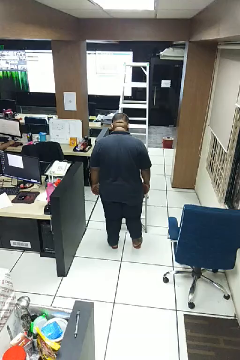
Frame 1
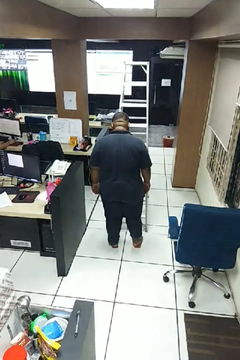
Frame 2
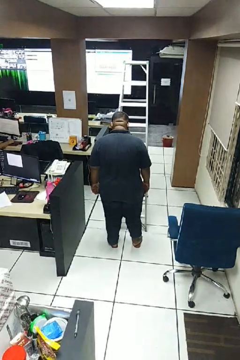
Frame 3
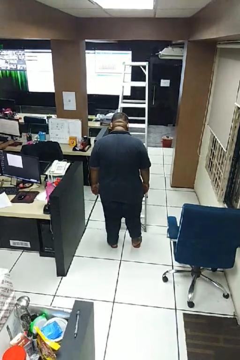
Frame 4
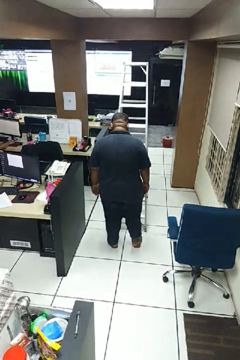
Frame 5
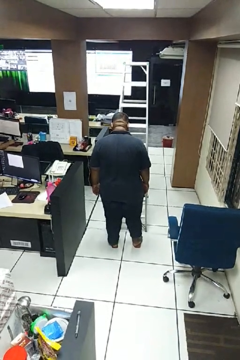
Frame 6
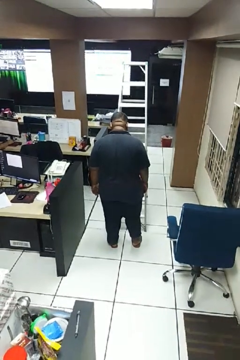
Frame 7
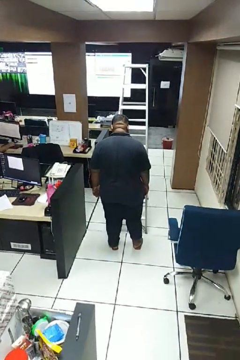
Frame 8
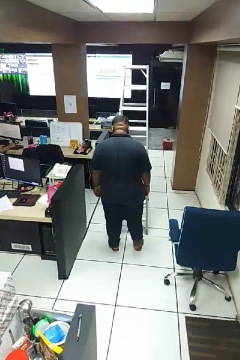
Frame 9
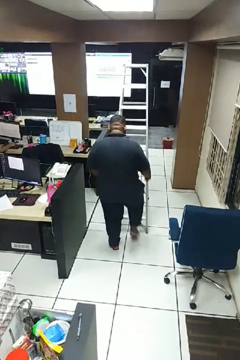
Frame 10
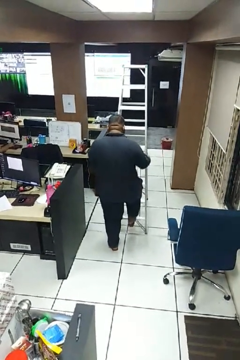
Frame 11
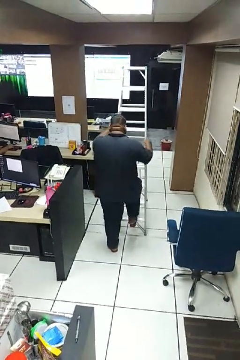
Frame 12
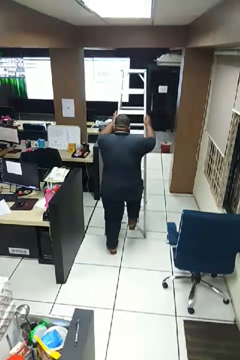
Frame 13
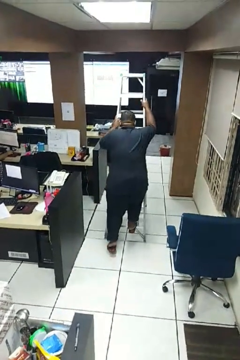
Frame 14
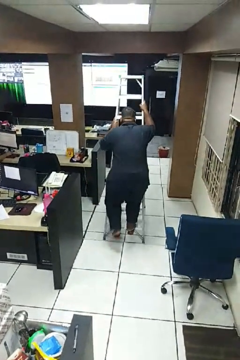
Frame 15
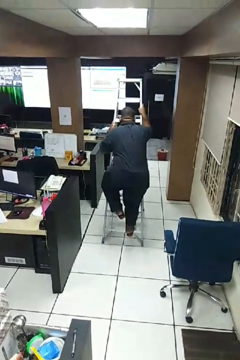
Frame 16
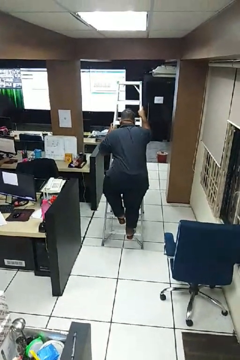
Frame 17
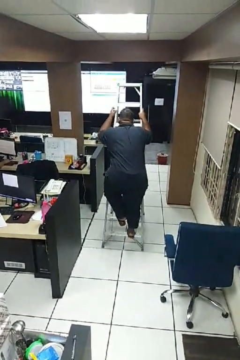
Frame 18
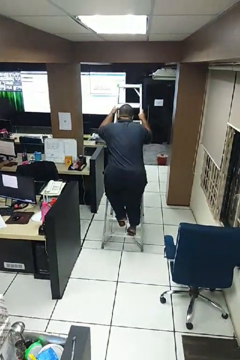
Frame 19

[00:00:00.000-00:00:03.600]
person climbs up ladder

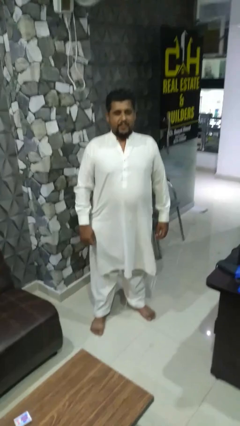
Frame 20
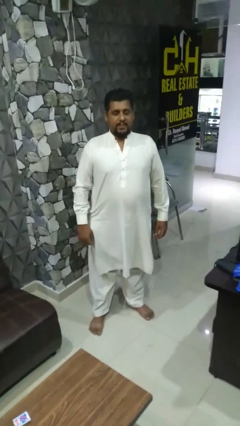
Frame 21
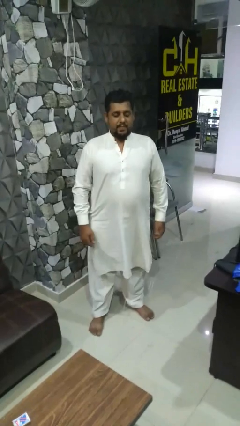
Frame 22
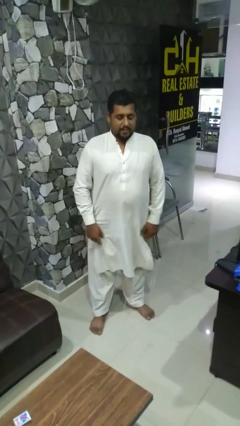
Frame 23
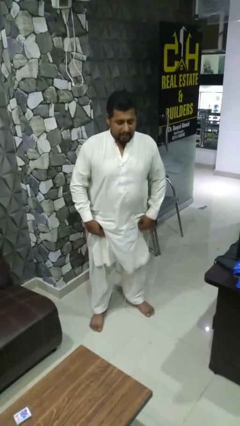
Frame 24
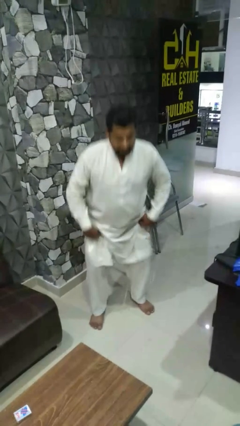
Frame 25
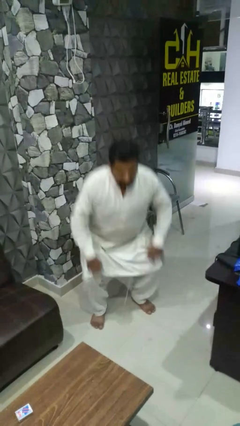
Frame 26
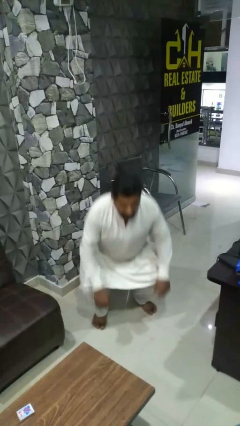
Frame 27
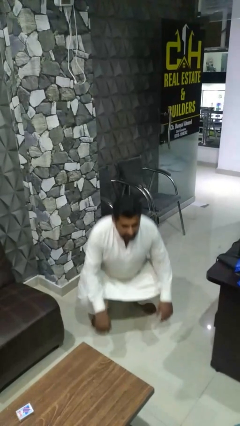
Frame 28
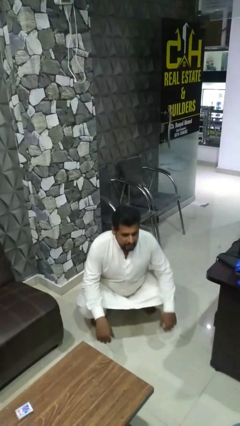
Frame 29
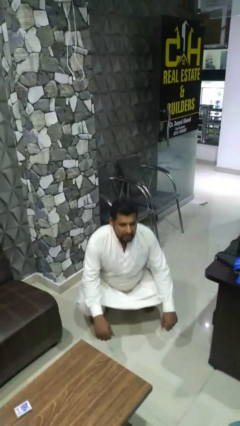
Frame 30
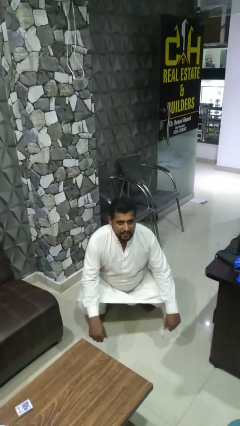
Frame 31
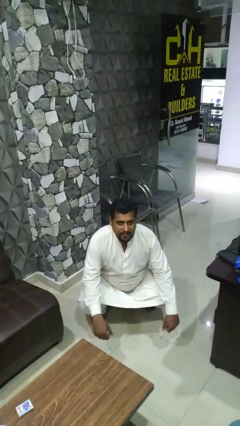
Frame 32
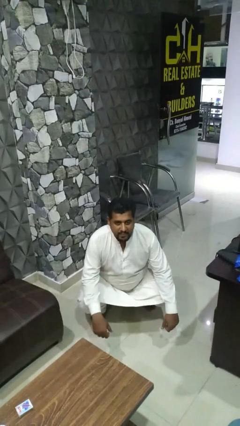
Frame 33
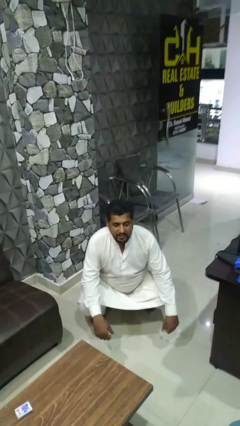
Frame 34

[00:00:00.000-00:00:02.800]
person squats

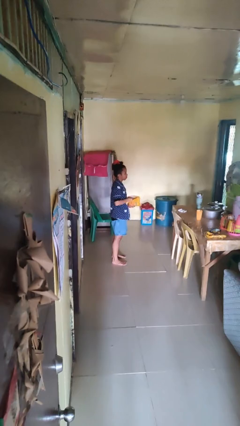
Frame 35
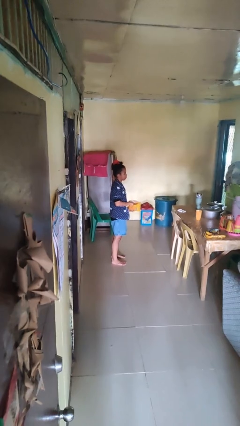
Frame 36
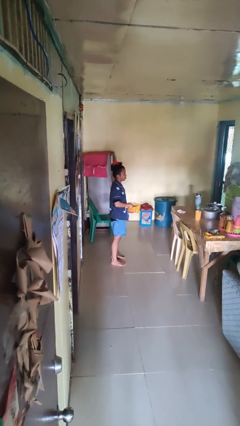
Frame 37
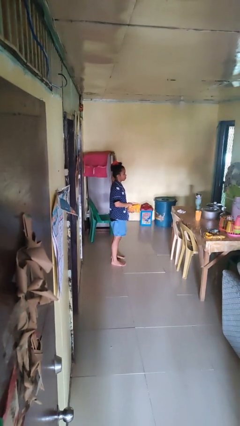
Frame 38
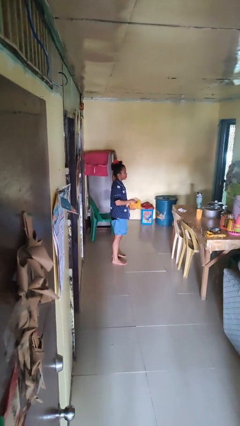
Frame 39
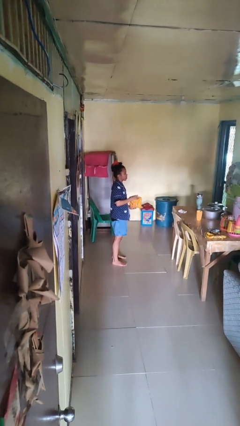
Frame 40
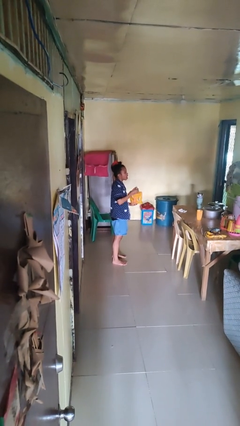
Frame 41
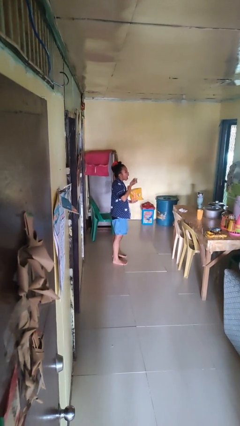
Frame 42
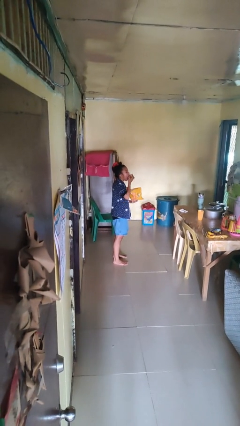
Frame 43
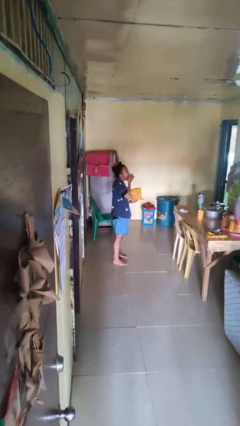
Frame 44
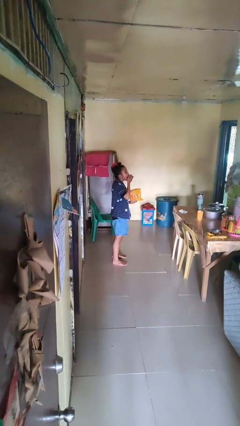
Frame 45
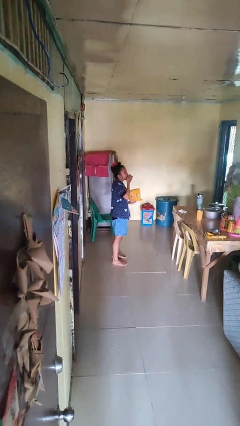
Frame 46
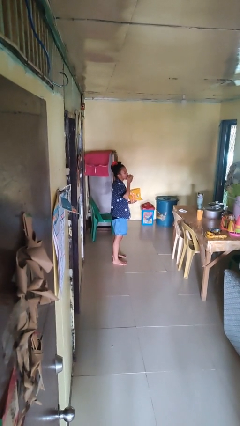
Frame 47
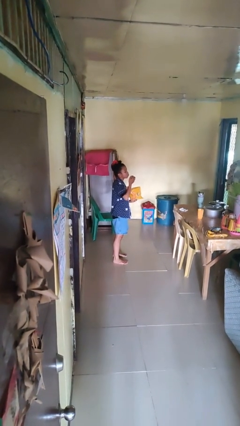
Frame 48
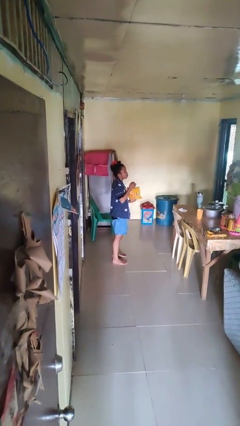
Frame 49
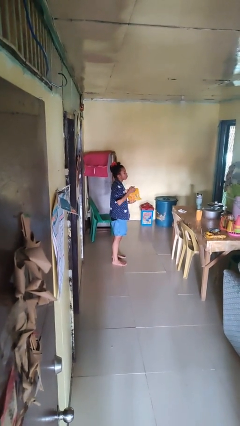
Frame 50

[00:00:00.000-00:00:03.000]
person eats snack from bag

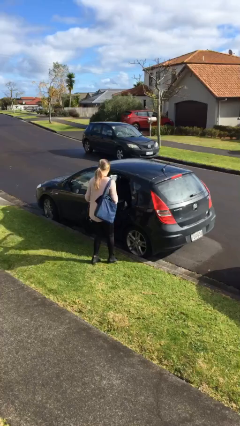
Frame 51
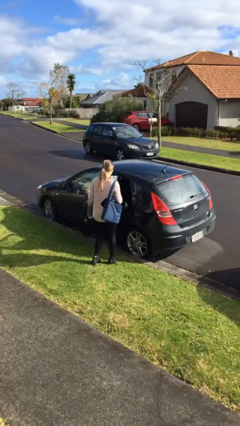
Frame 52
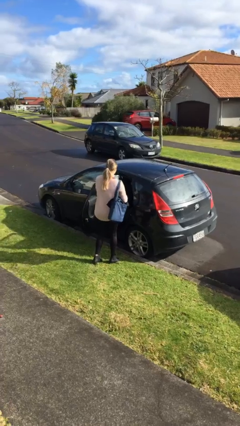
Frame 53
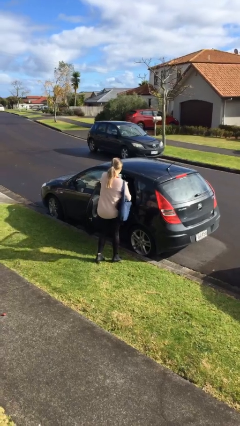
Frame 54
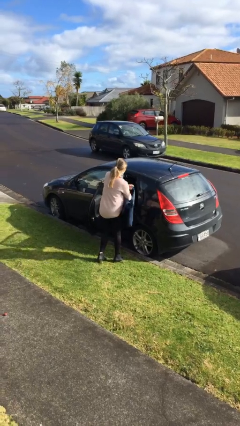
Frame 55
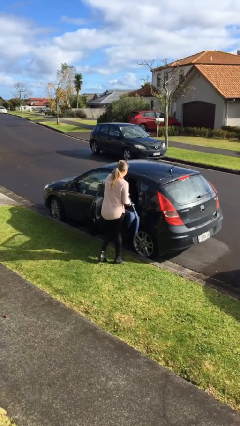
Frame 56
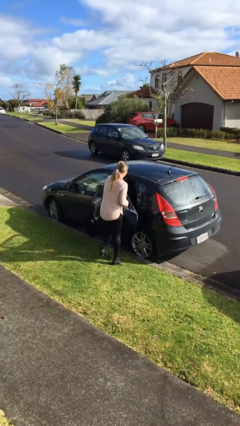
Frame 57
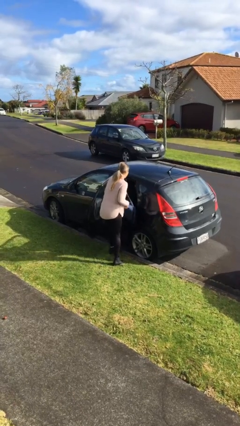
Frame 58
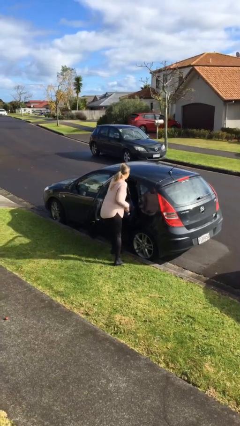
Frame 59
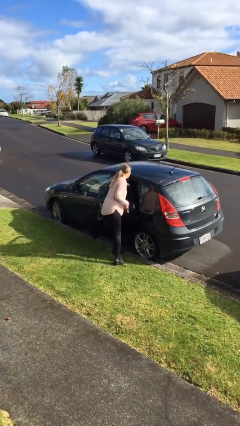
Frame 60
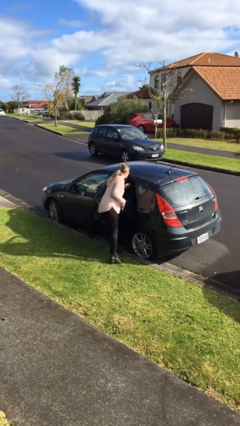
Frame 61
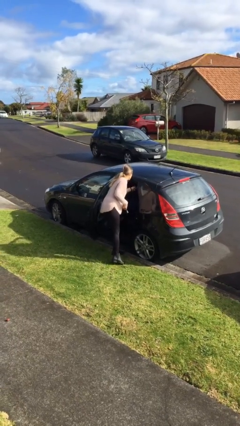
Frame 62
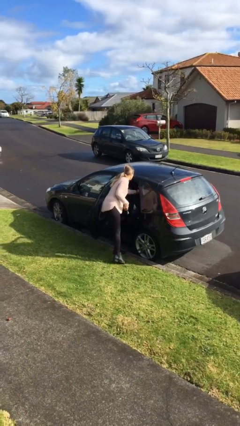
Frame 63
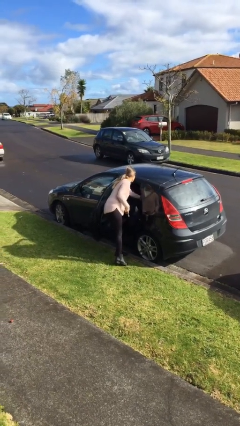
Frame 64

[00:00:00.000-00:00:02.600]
person loads car

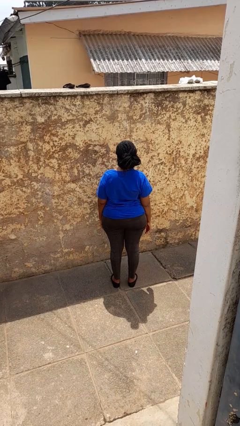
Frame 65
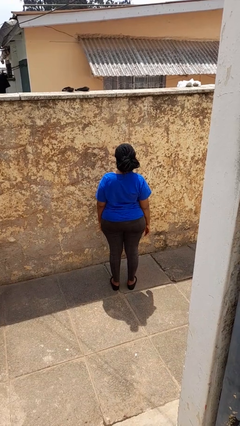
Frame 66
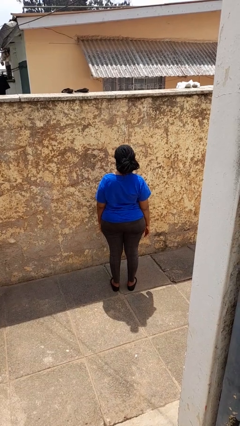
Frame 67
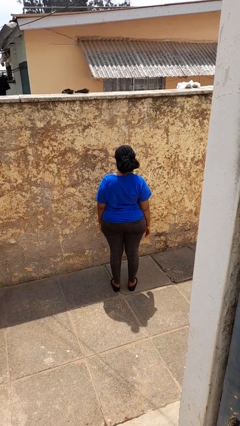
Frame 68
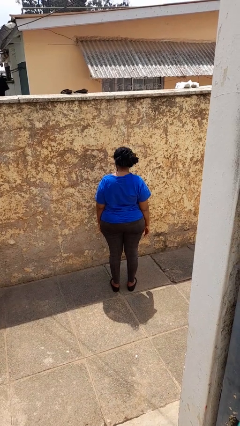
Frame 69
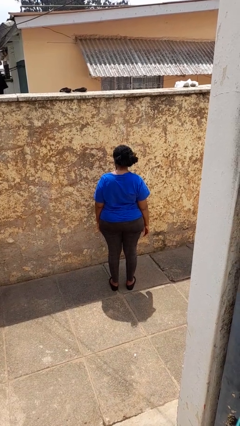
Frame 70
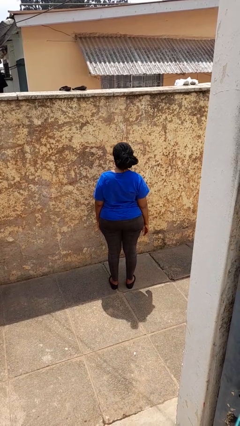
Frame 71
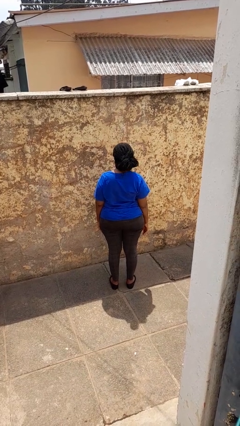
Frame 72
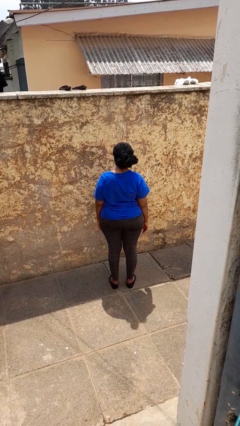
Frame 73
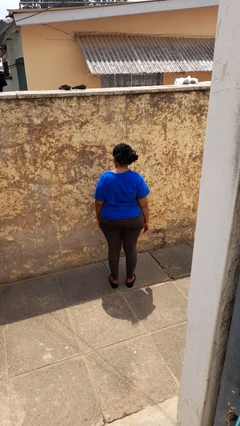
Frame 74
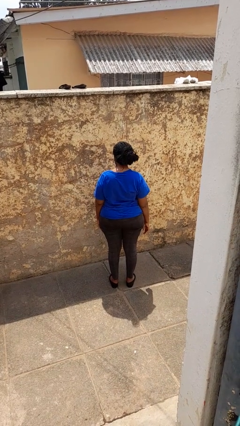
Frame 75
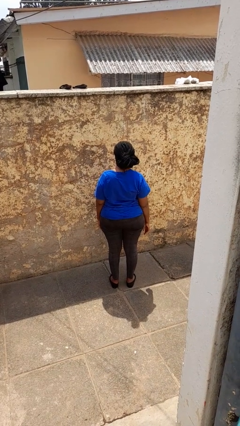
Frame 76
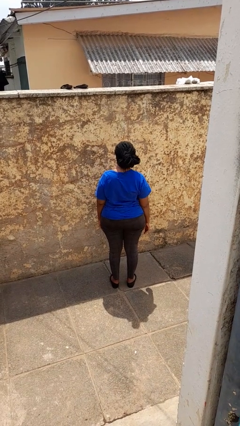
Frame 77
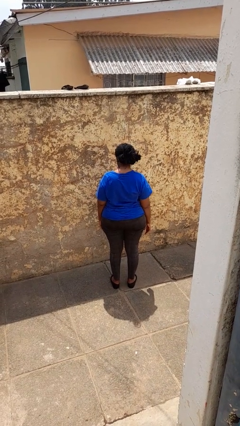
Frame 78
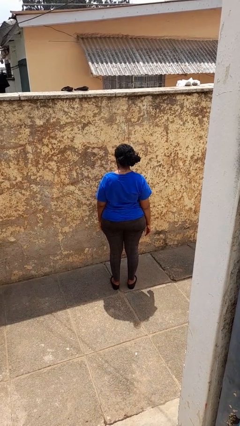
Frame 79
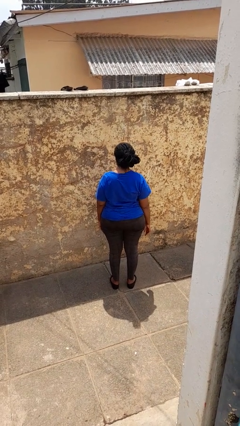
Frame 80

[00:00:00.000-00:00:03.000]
person nods head

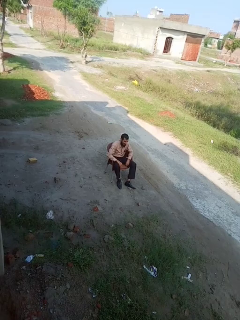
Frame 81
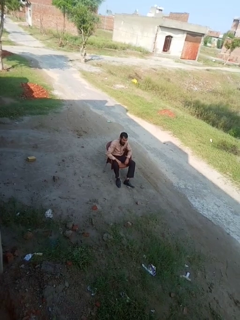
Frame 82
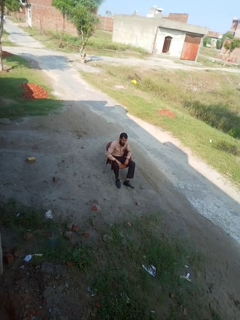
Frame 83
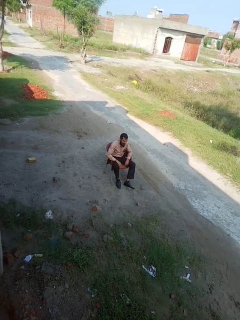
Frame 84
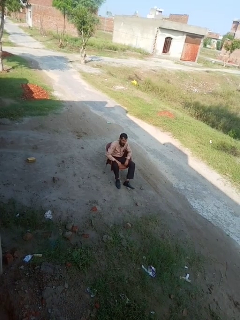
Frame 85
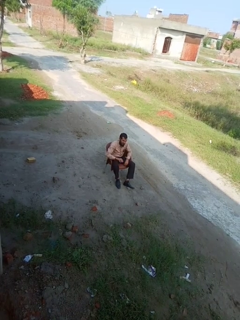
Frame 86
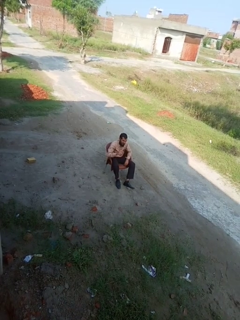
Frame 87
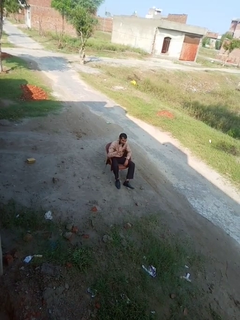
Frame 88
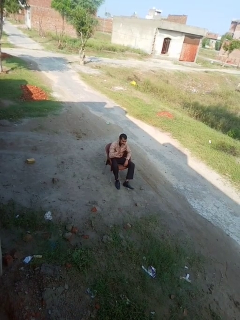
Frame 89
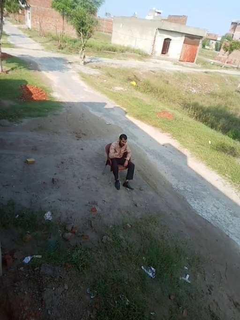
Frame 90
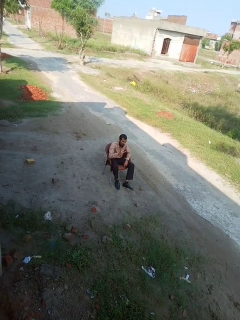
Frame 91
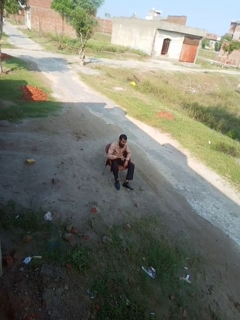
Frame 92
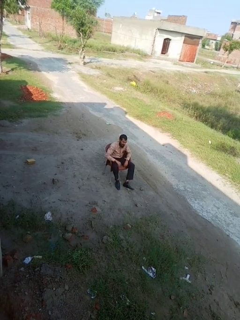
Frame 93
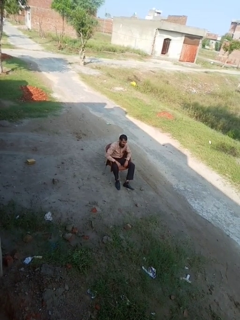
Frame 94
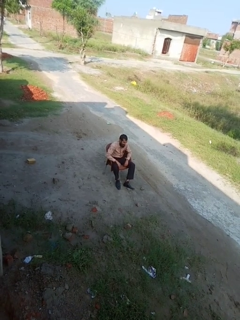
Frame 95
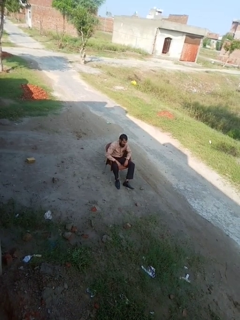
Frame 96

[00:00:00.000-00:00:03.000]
person gestures number five

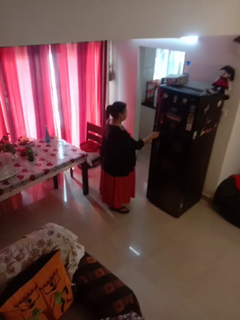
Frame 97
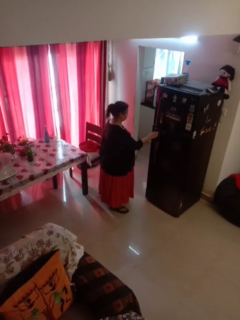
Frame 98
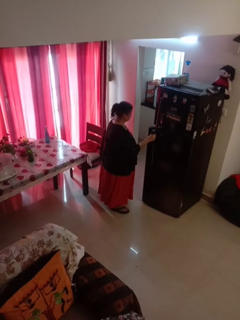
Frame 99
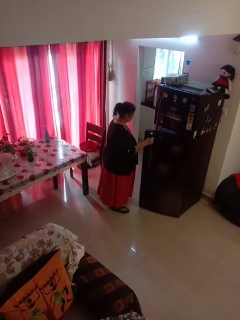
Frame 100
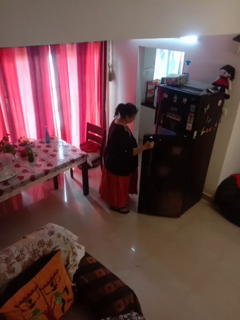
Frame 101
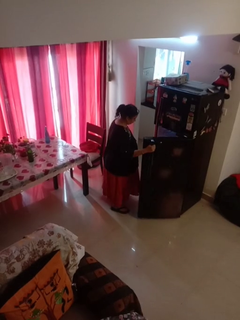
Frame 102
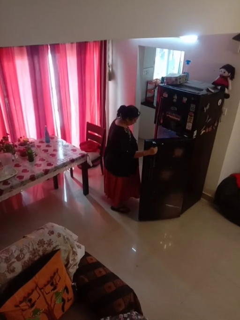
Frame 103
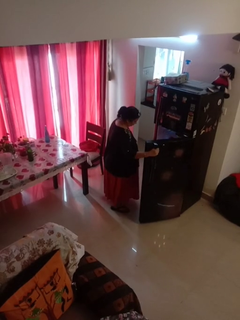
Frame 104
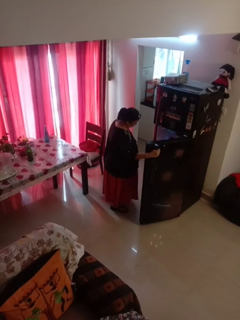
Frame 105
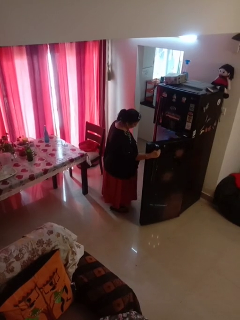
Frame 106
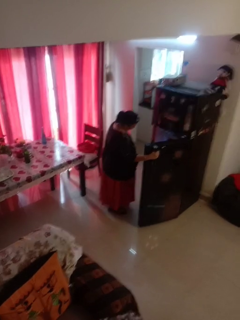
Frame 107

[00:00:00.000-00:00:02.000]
person opens refrigerator
